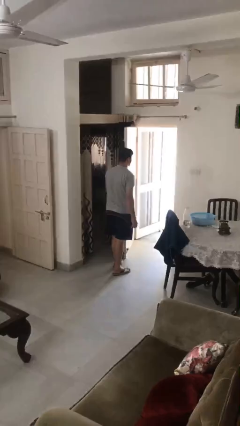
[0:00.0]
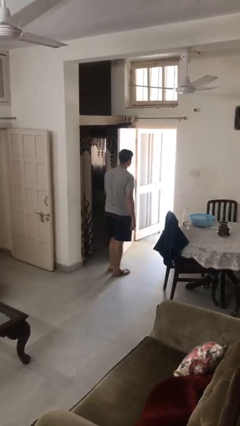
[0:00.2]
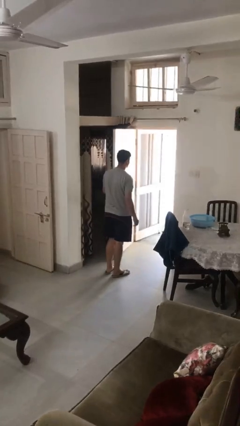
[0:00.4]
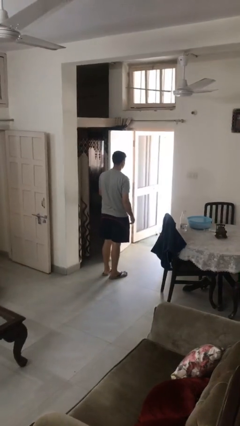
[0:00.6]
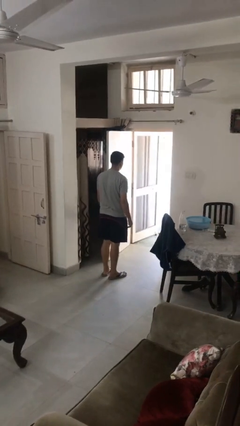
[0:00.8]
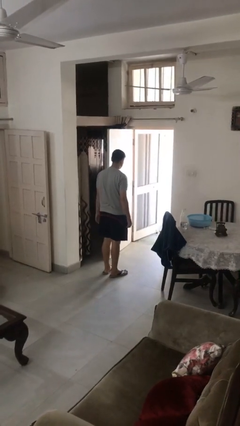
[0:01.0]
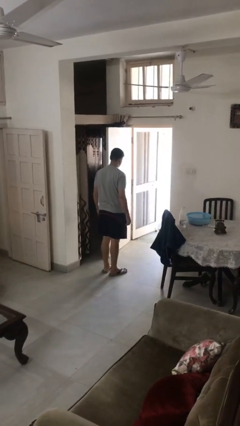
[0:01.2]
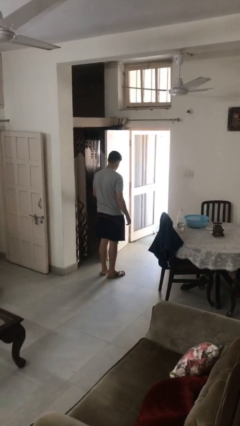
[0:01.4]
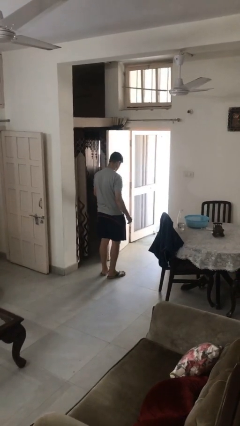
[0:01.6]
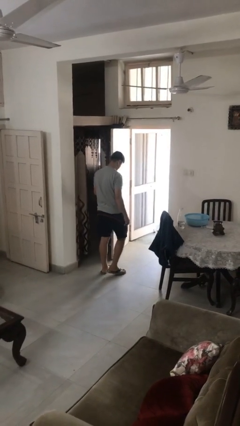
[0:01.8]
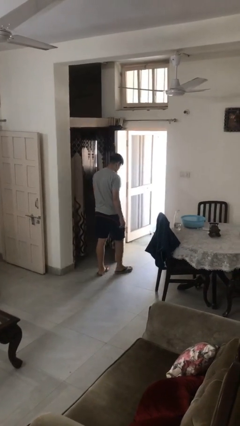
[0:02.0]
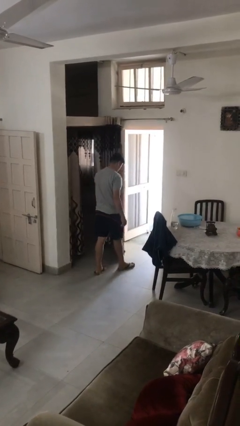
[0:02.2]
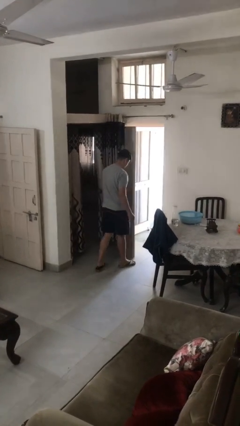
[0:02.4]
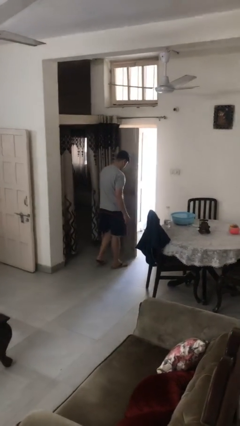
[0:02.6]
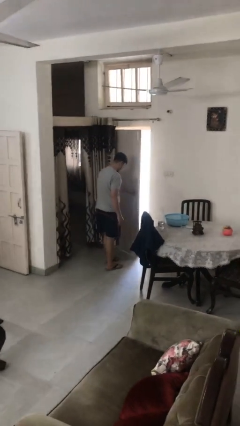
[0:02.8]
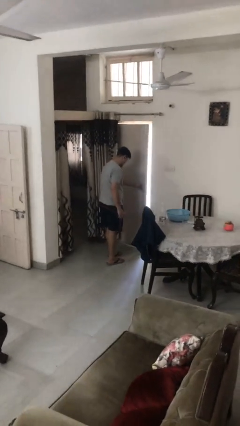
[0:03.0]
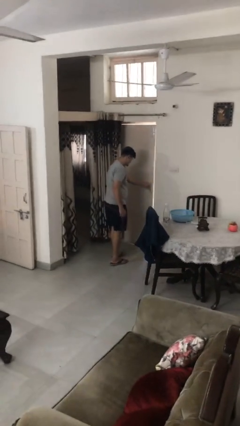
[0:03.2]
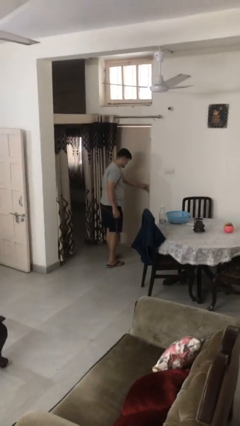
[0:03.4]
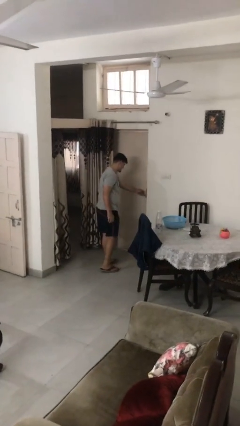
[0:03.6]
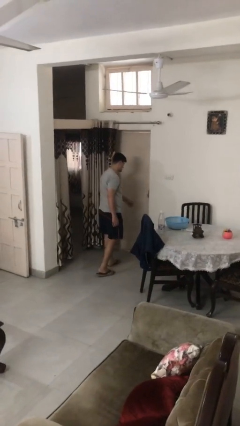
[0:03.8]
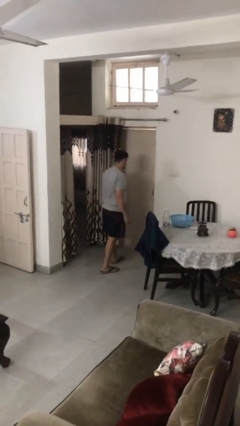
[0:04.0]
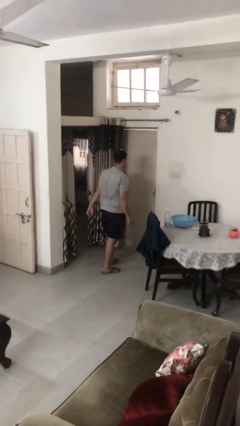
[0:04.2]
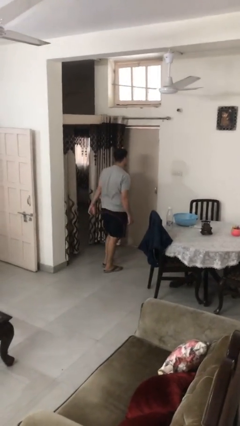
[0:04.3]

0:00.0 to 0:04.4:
person closes facility door

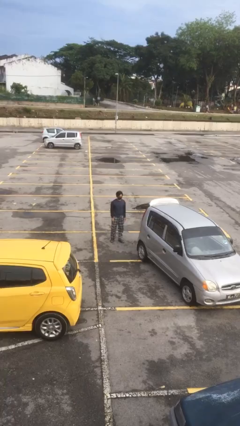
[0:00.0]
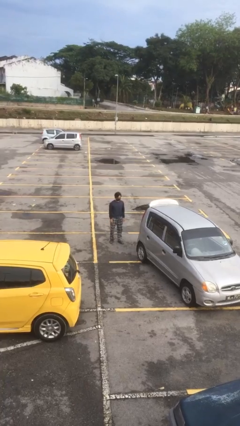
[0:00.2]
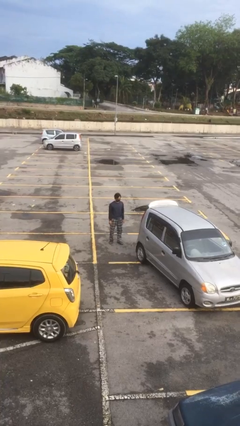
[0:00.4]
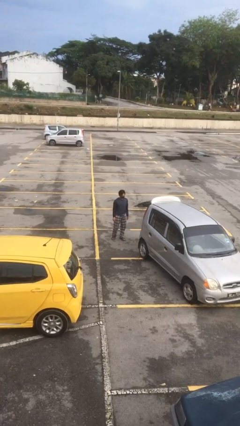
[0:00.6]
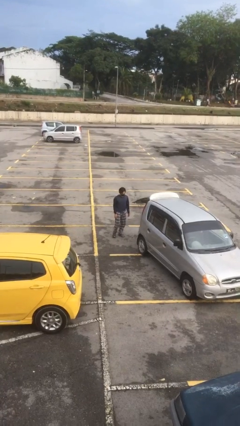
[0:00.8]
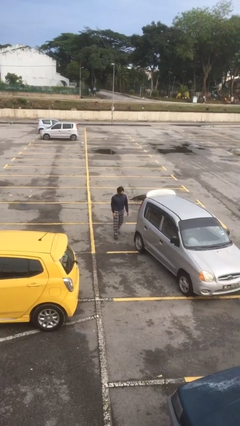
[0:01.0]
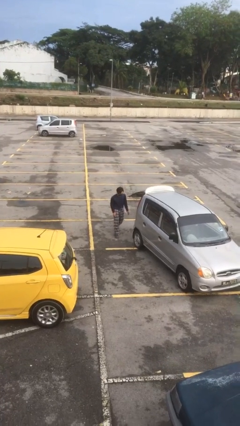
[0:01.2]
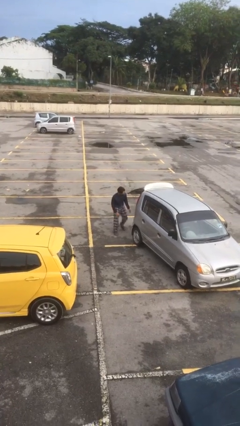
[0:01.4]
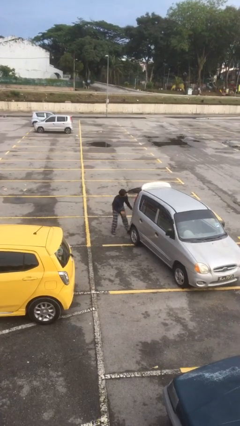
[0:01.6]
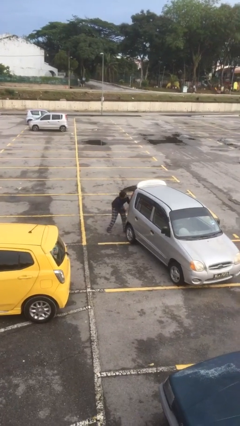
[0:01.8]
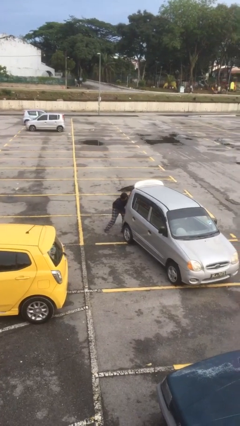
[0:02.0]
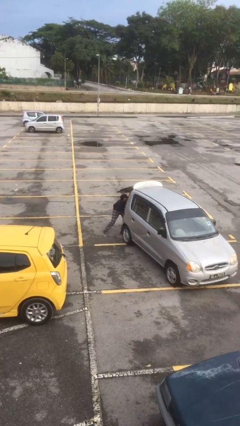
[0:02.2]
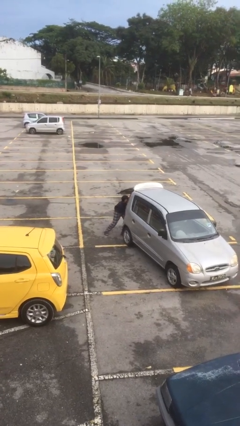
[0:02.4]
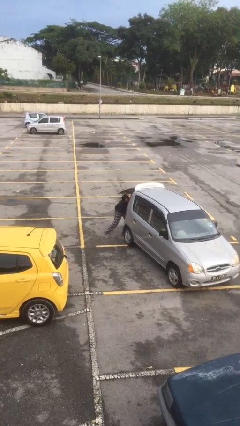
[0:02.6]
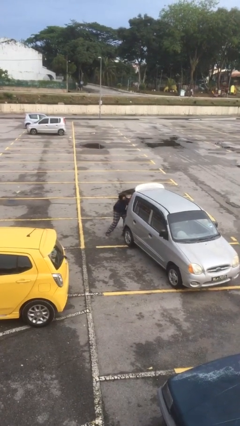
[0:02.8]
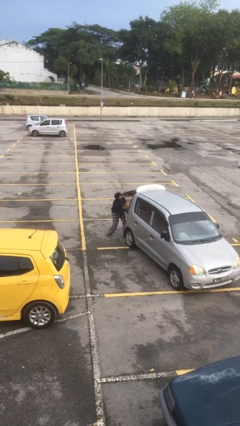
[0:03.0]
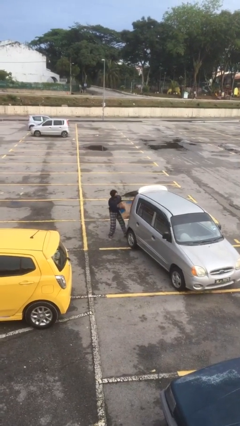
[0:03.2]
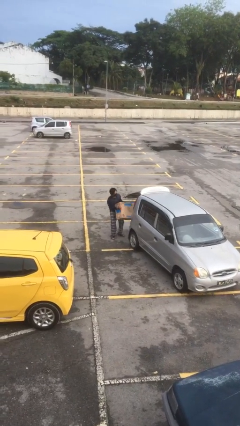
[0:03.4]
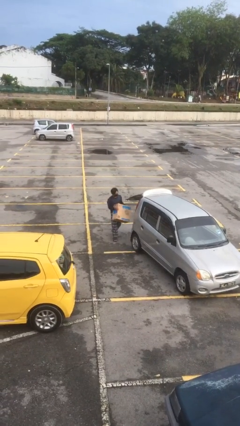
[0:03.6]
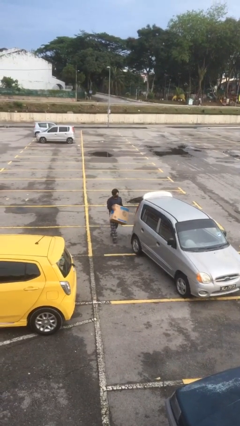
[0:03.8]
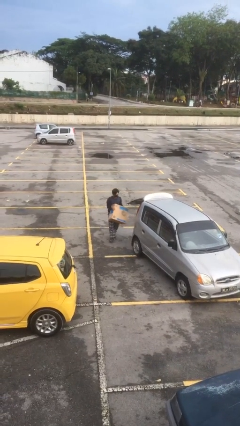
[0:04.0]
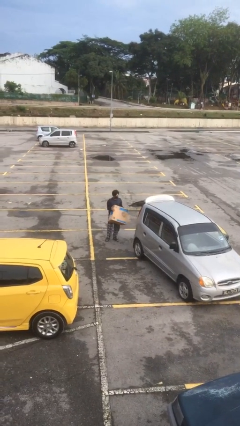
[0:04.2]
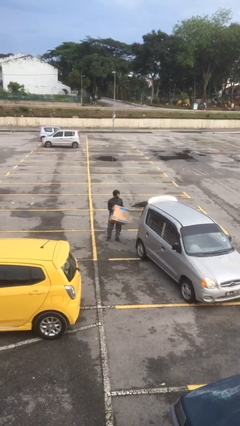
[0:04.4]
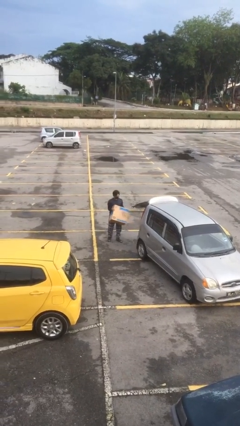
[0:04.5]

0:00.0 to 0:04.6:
person unloads car

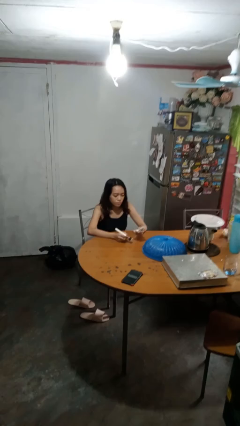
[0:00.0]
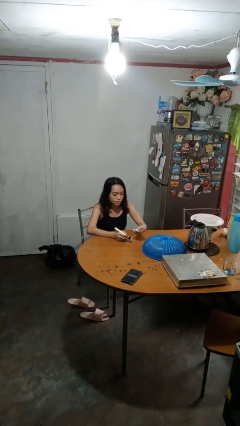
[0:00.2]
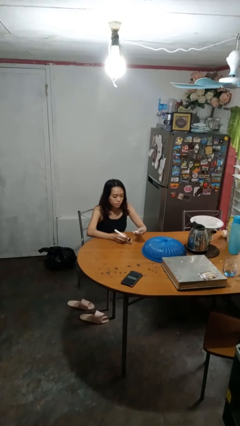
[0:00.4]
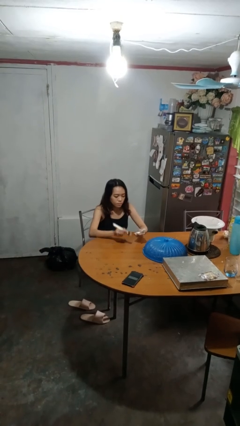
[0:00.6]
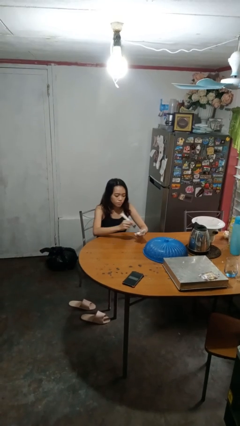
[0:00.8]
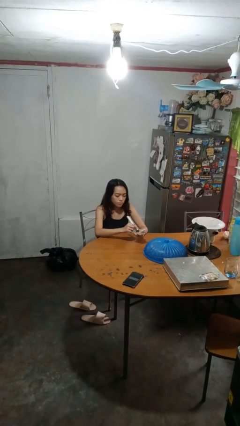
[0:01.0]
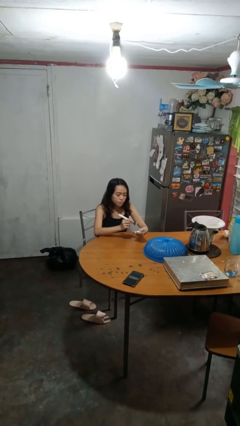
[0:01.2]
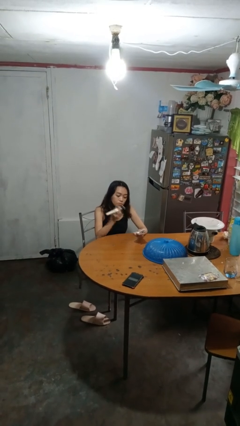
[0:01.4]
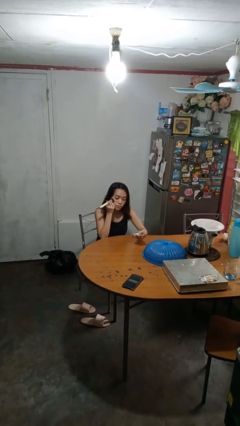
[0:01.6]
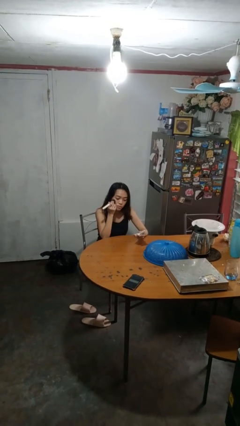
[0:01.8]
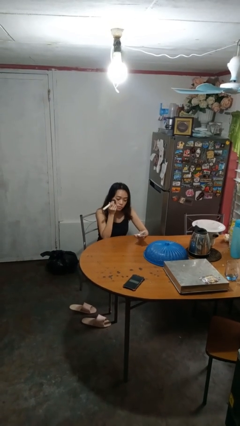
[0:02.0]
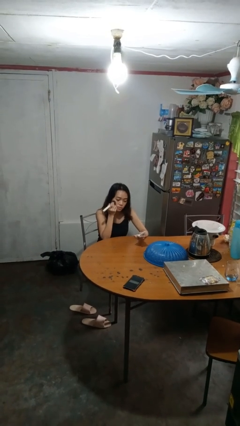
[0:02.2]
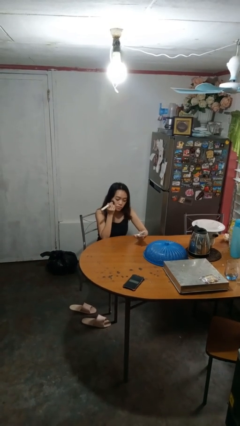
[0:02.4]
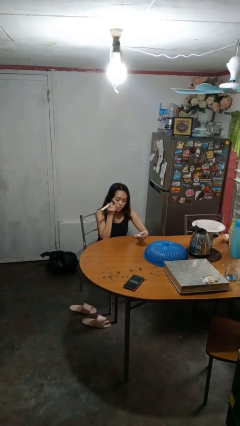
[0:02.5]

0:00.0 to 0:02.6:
person applies foundation makeup

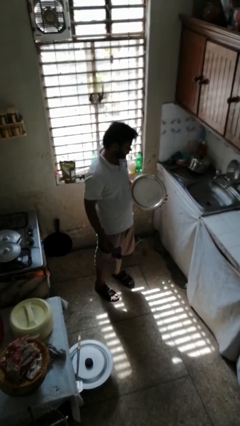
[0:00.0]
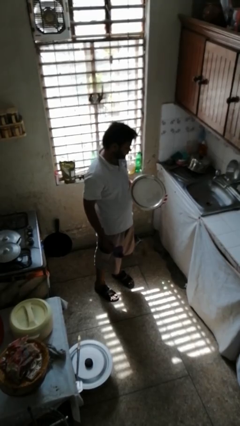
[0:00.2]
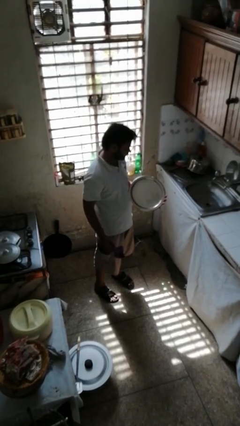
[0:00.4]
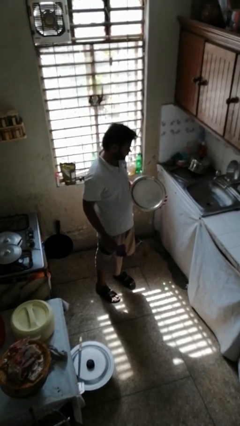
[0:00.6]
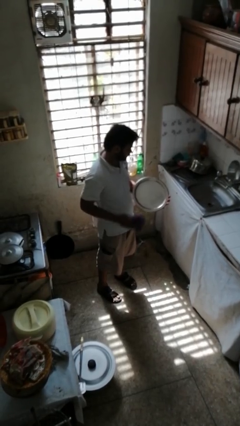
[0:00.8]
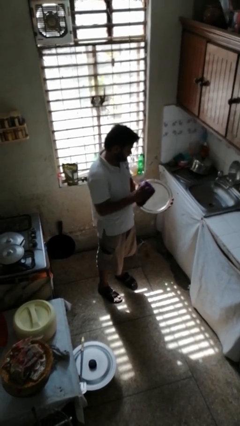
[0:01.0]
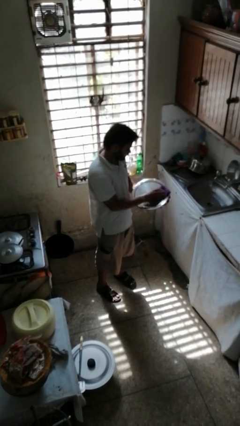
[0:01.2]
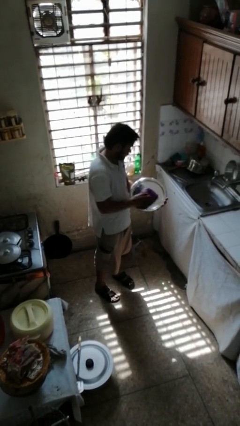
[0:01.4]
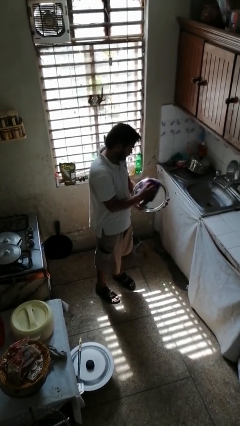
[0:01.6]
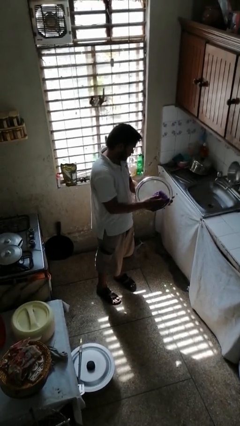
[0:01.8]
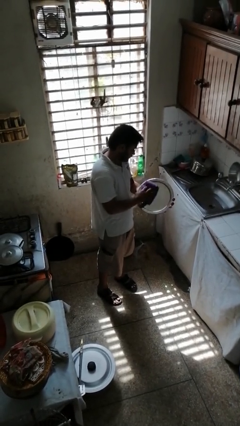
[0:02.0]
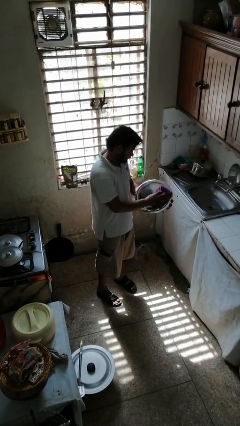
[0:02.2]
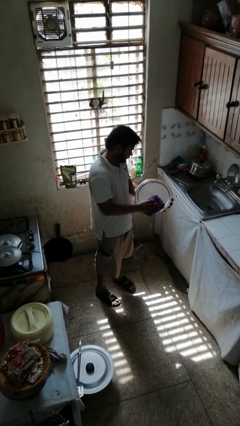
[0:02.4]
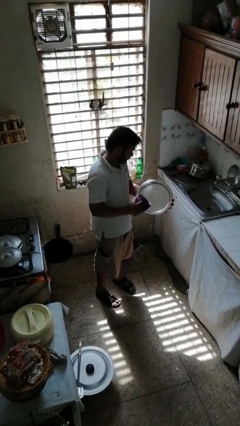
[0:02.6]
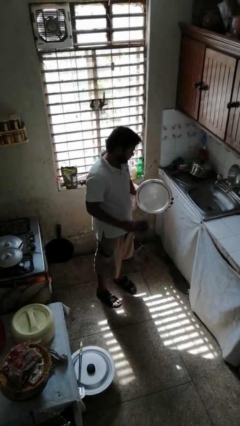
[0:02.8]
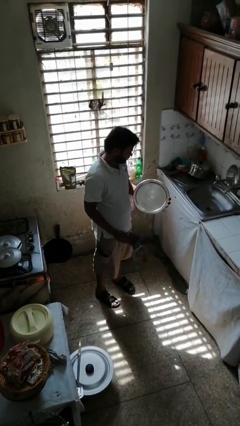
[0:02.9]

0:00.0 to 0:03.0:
person dries dish

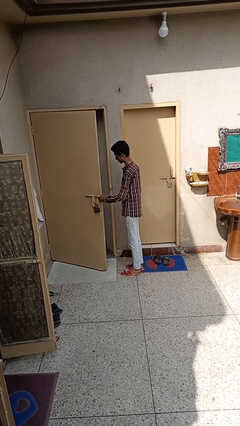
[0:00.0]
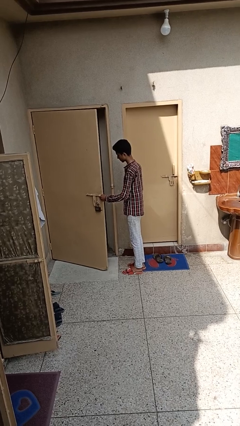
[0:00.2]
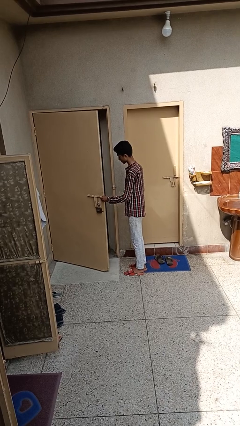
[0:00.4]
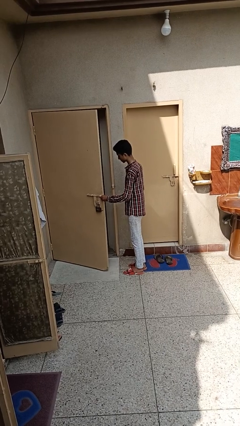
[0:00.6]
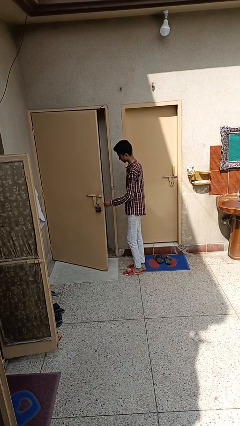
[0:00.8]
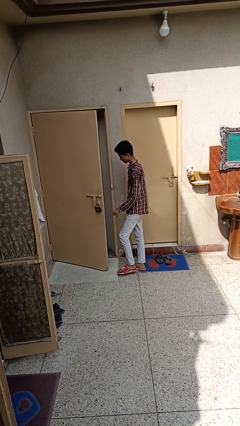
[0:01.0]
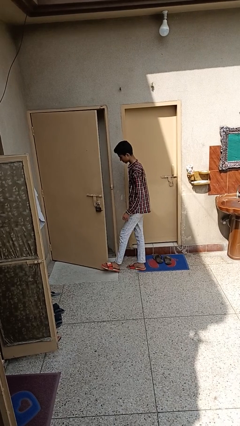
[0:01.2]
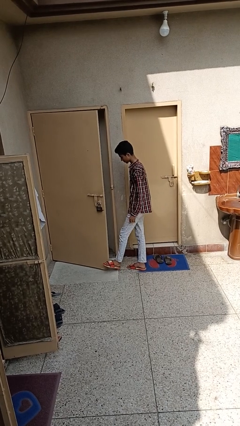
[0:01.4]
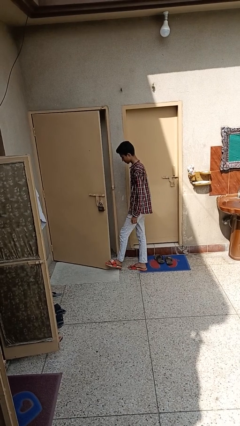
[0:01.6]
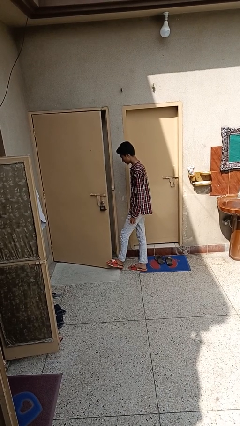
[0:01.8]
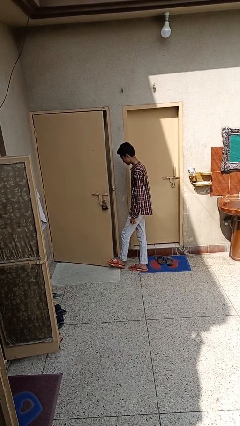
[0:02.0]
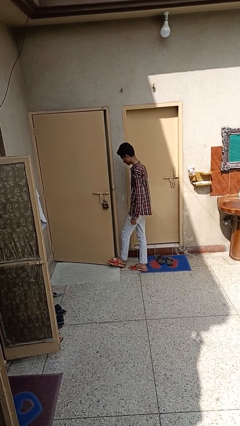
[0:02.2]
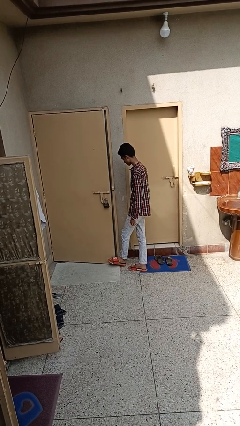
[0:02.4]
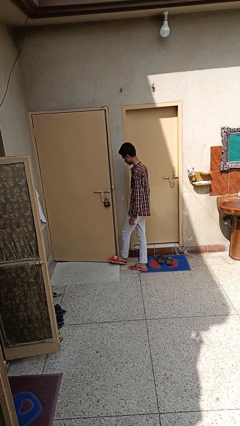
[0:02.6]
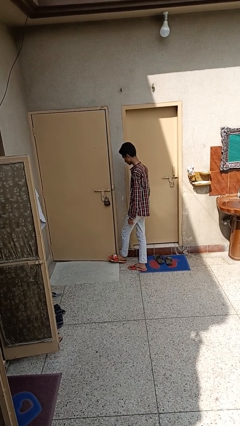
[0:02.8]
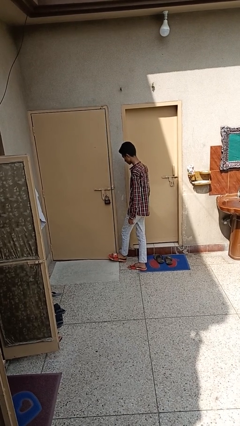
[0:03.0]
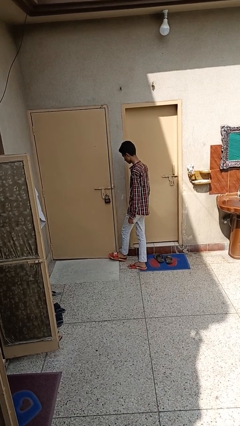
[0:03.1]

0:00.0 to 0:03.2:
person closes door with foot
